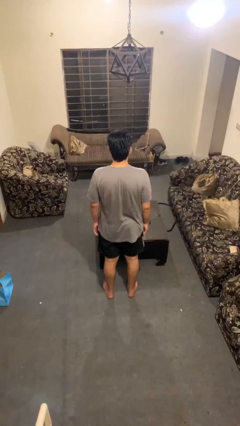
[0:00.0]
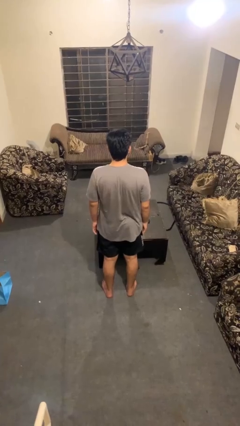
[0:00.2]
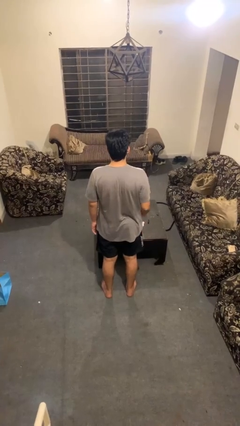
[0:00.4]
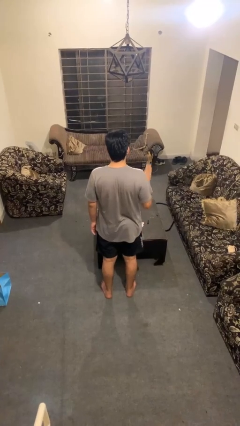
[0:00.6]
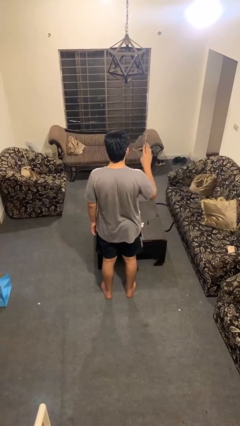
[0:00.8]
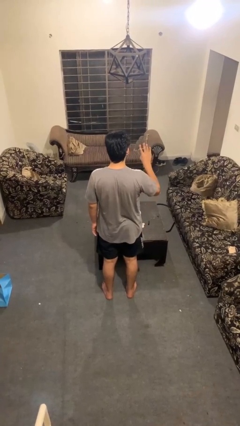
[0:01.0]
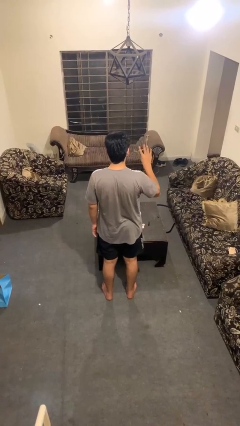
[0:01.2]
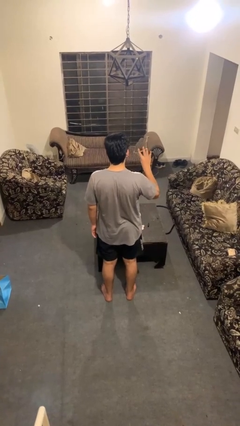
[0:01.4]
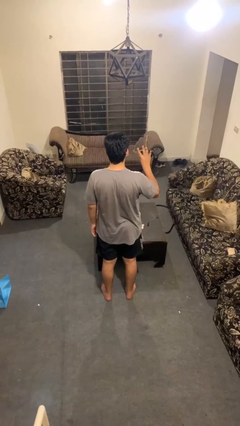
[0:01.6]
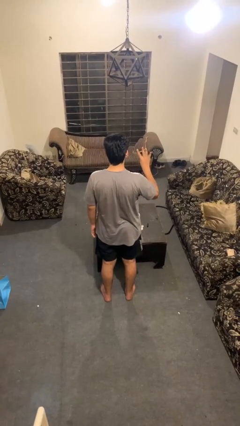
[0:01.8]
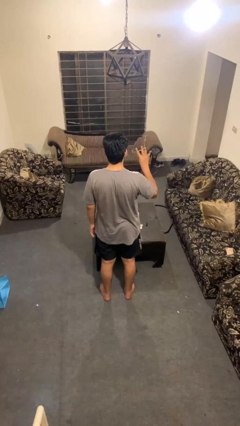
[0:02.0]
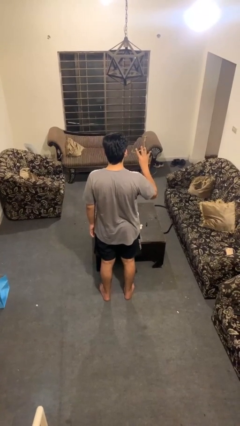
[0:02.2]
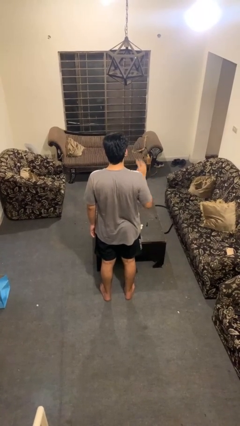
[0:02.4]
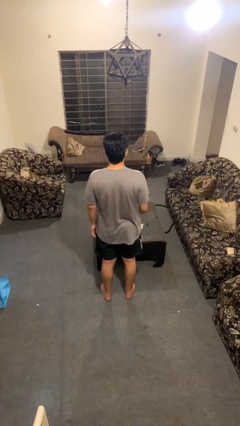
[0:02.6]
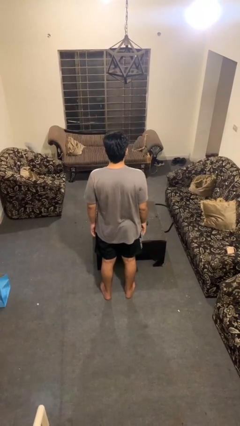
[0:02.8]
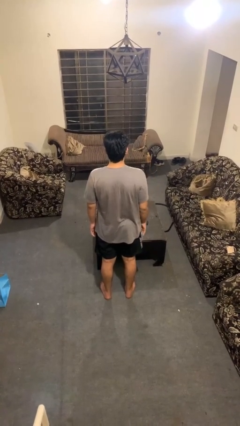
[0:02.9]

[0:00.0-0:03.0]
person gestures number four

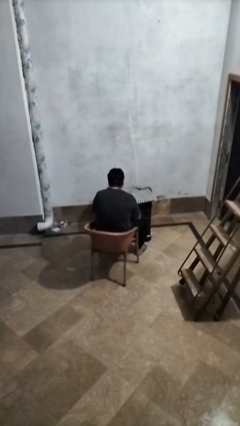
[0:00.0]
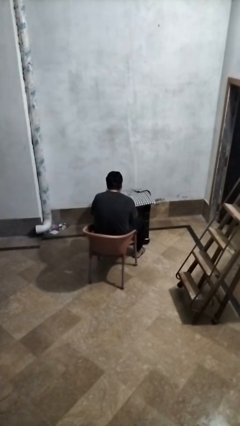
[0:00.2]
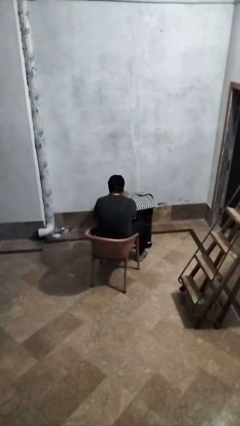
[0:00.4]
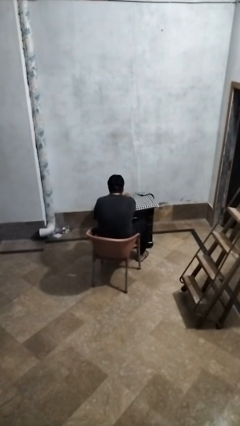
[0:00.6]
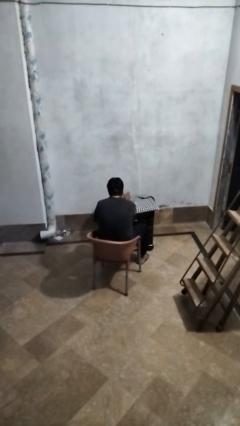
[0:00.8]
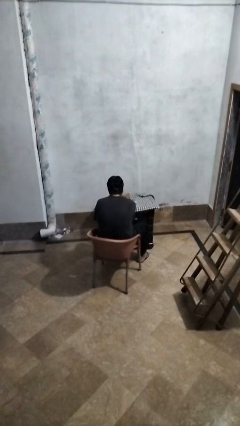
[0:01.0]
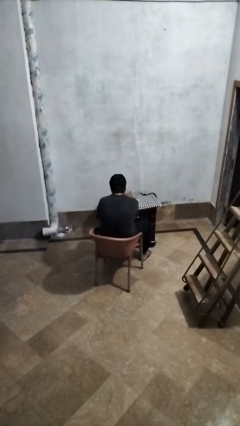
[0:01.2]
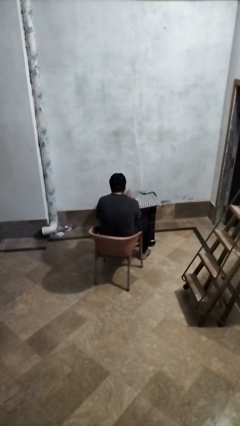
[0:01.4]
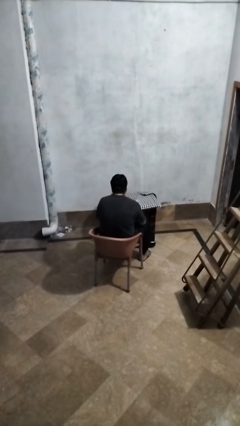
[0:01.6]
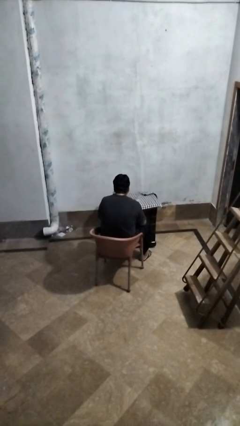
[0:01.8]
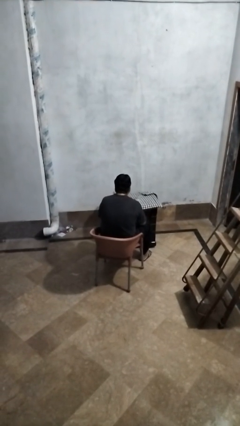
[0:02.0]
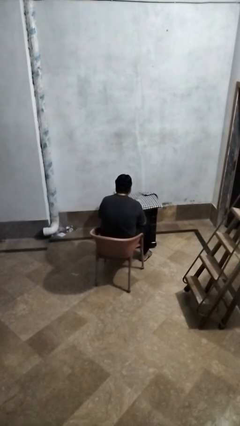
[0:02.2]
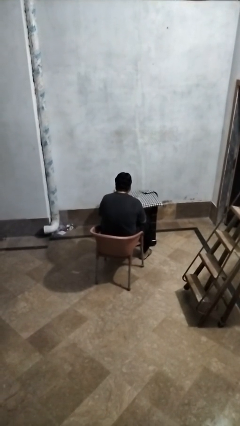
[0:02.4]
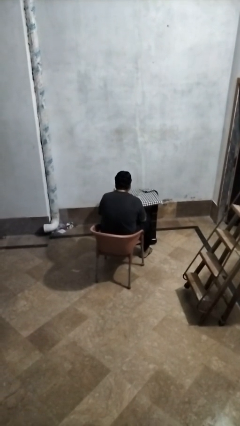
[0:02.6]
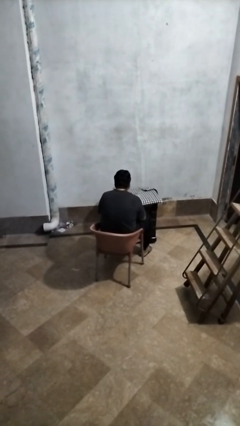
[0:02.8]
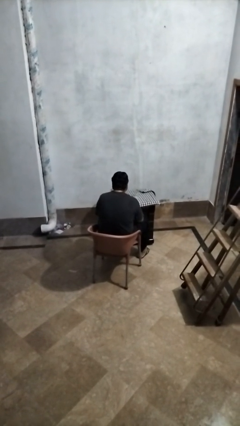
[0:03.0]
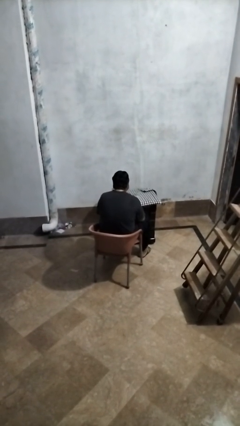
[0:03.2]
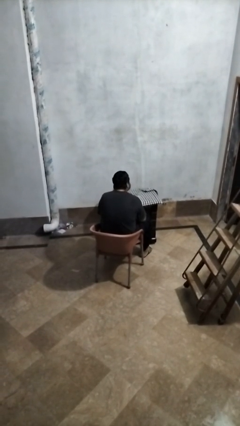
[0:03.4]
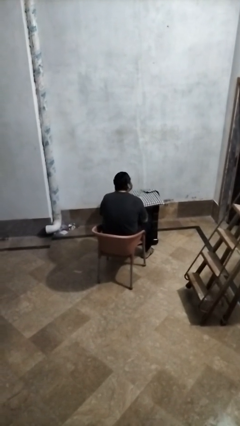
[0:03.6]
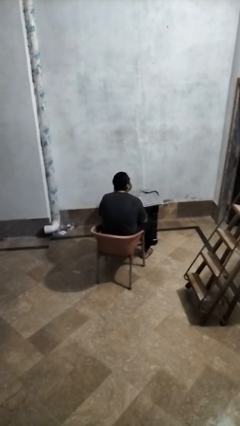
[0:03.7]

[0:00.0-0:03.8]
person sets upright glass

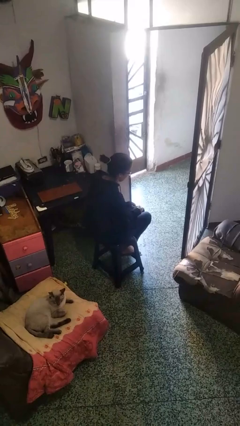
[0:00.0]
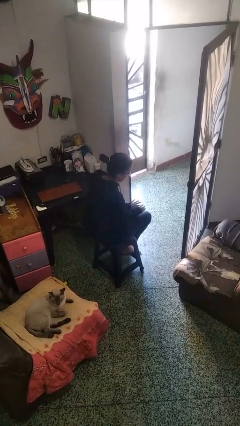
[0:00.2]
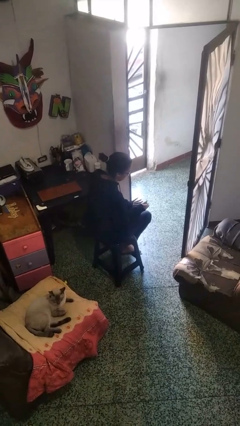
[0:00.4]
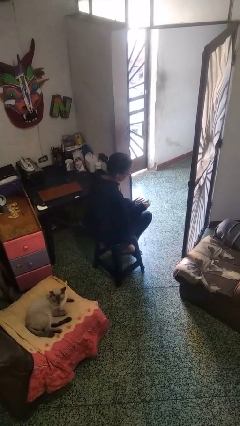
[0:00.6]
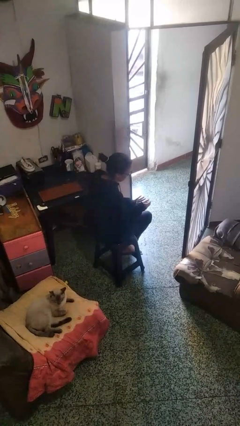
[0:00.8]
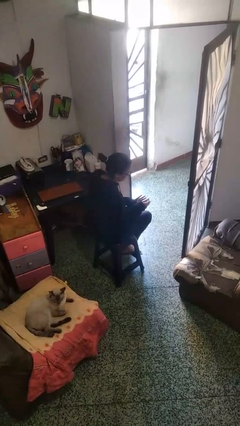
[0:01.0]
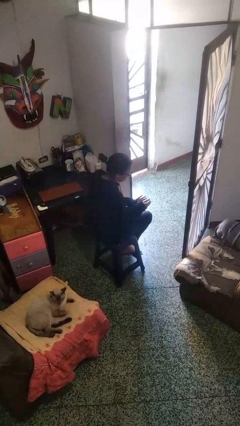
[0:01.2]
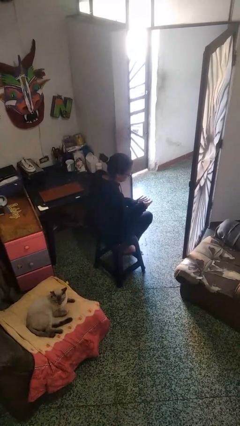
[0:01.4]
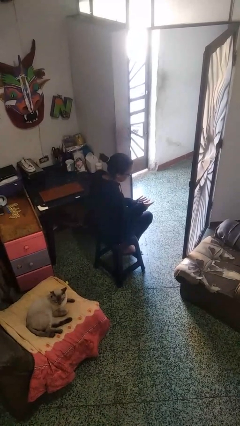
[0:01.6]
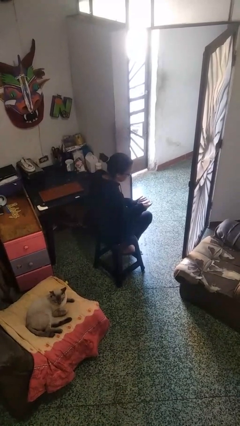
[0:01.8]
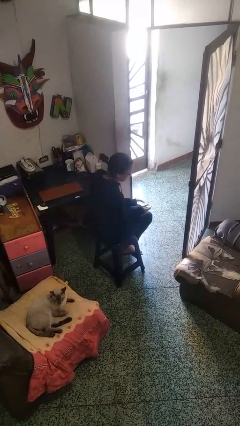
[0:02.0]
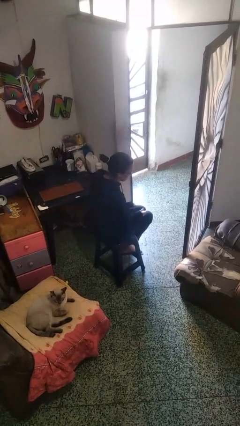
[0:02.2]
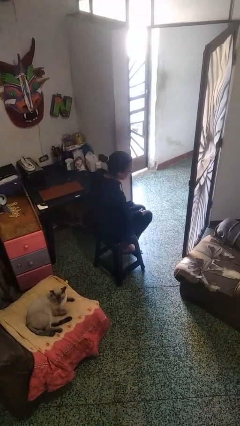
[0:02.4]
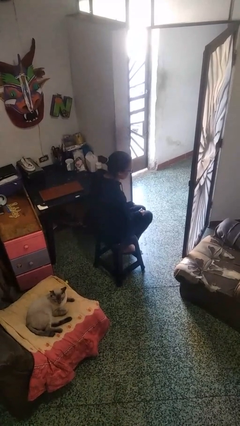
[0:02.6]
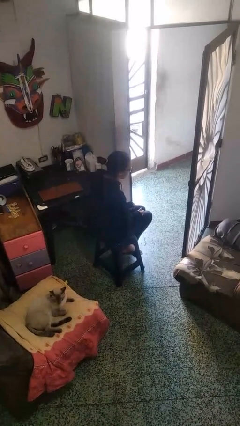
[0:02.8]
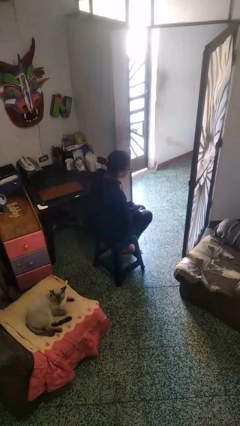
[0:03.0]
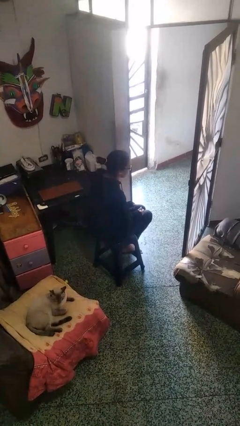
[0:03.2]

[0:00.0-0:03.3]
person clips fingernails

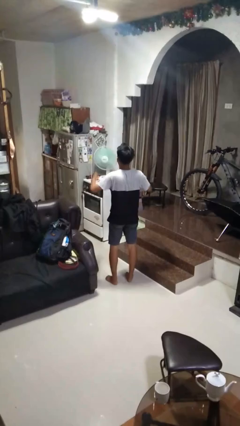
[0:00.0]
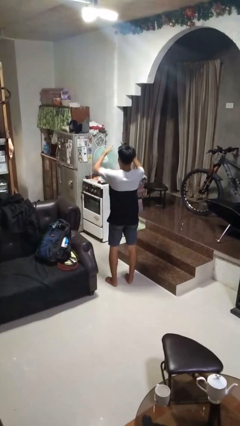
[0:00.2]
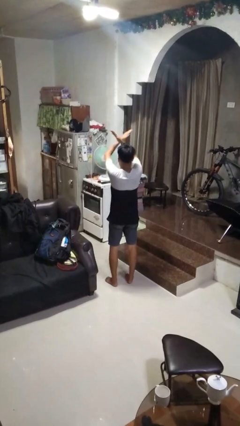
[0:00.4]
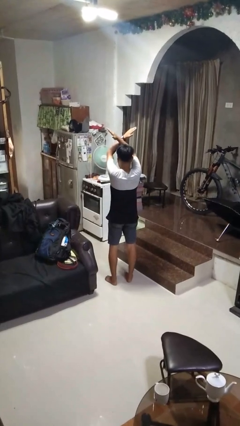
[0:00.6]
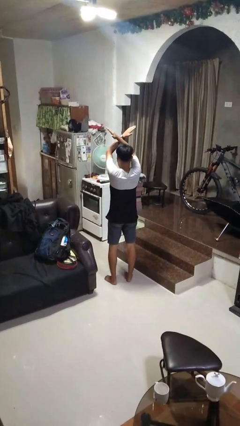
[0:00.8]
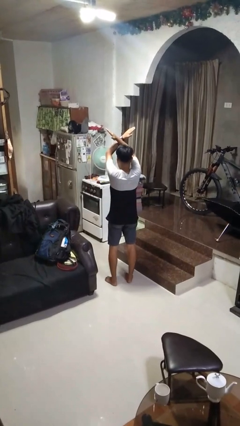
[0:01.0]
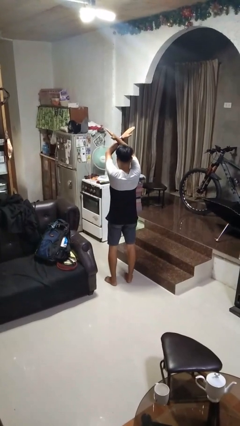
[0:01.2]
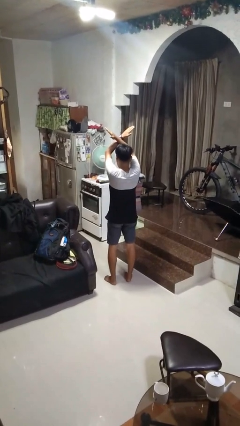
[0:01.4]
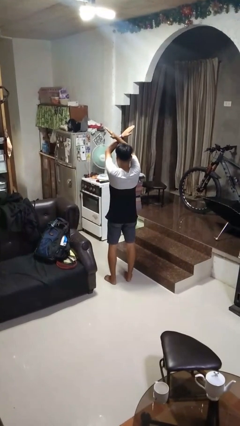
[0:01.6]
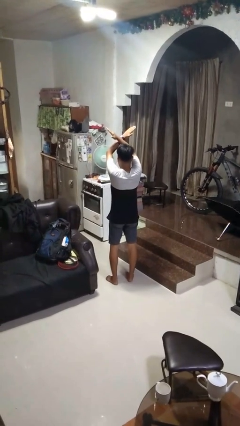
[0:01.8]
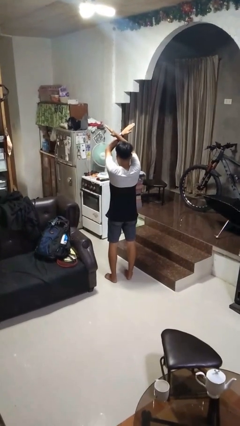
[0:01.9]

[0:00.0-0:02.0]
person gestures arms x

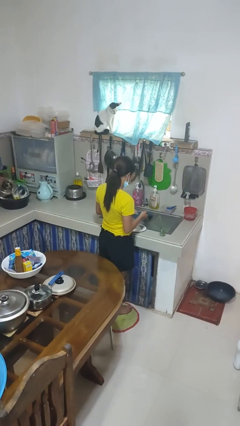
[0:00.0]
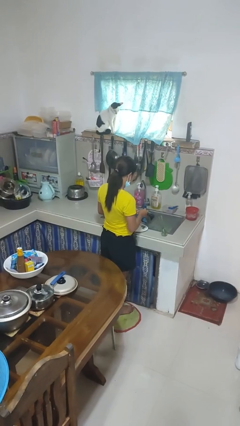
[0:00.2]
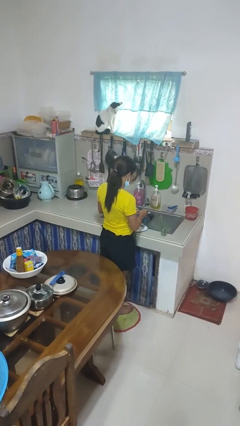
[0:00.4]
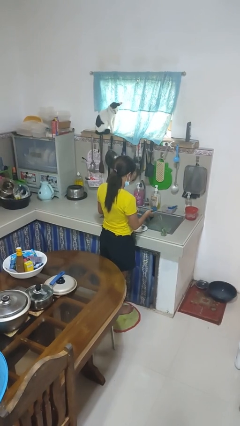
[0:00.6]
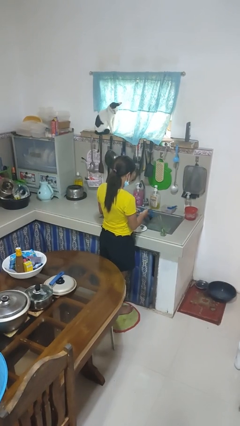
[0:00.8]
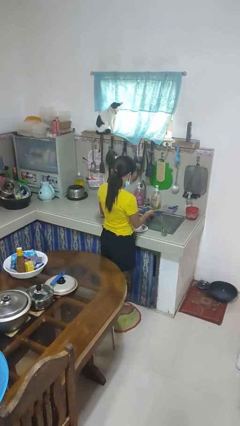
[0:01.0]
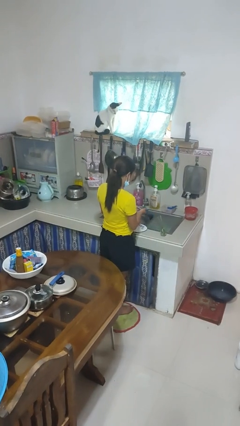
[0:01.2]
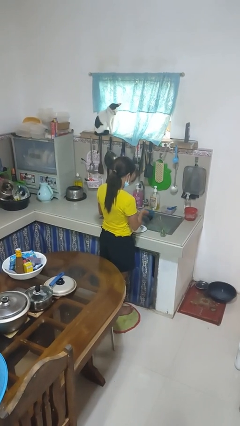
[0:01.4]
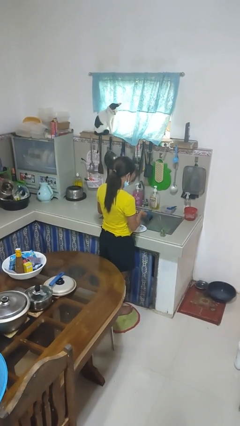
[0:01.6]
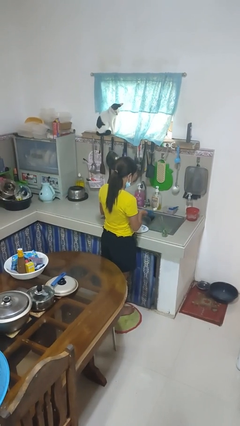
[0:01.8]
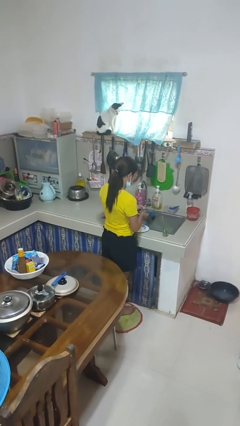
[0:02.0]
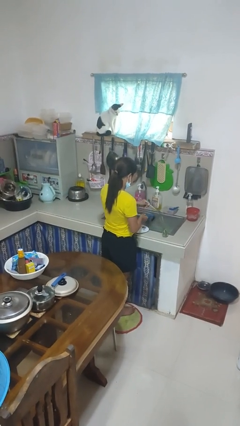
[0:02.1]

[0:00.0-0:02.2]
person dries dish

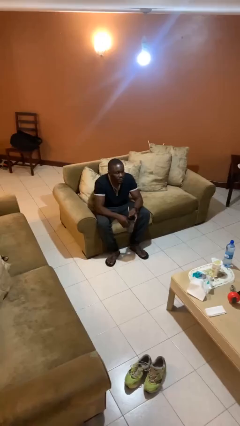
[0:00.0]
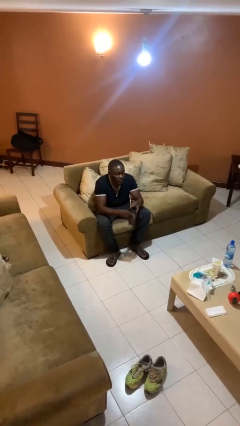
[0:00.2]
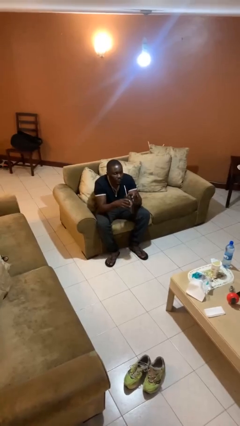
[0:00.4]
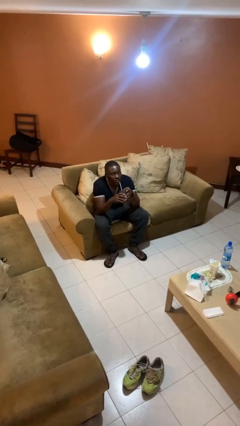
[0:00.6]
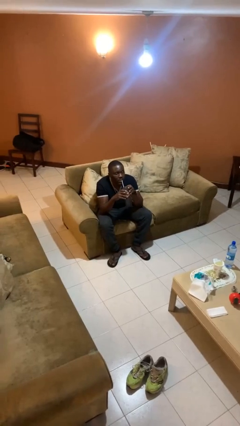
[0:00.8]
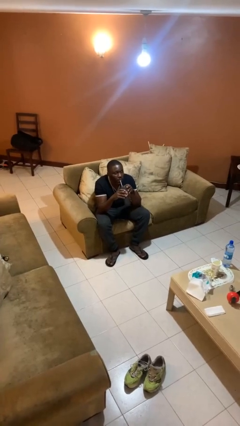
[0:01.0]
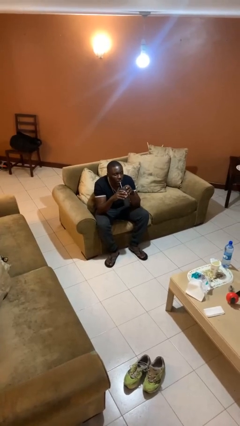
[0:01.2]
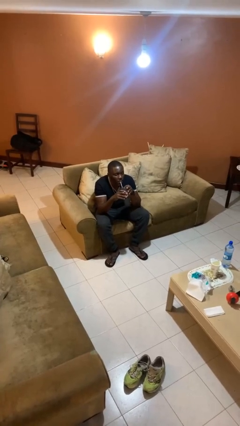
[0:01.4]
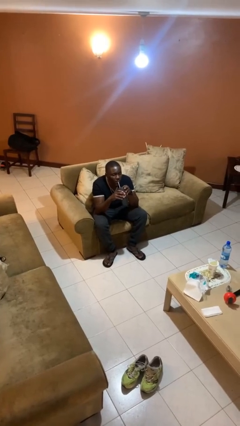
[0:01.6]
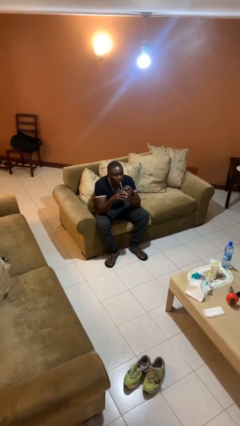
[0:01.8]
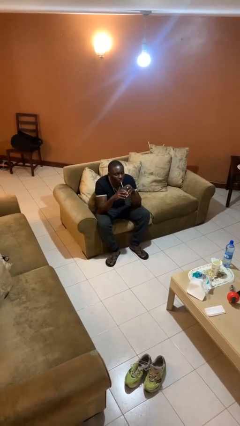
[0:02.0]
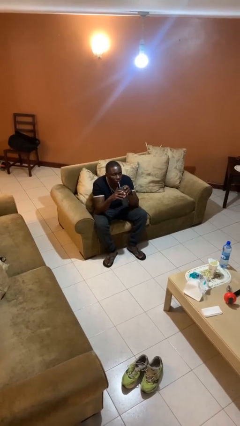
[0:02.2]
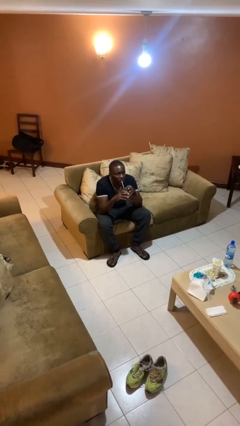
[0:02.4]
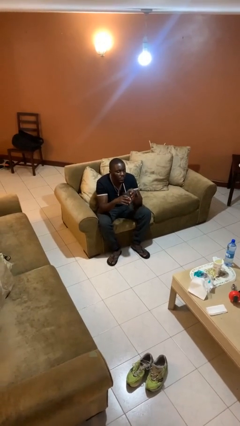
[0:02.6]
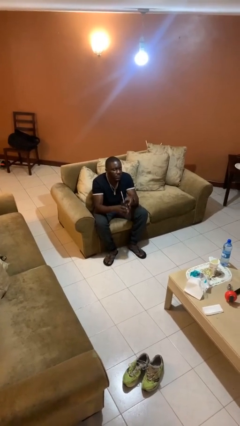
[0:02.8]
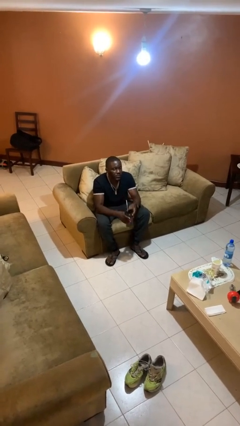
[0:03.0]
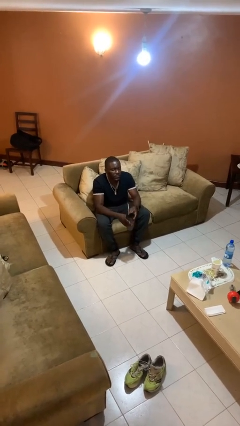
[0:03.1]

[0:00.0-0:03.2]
person drinks from straw

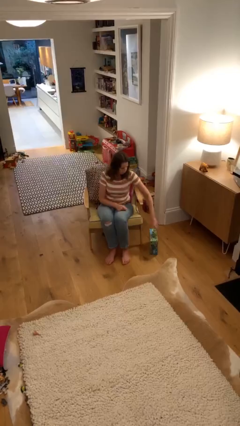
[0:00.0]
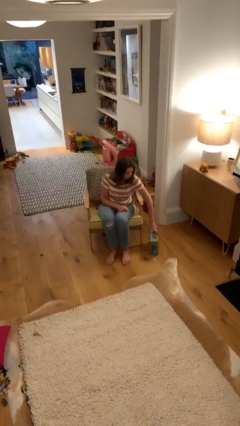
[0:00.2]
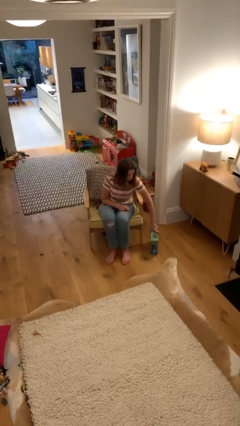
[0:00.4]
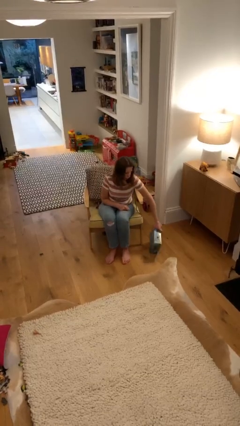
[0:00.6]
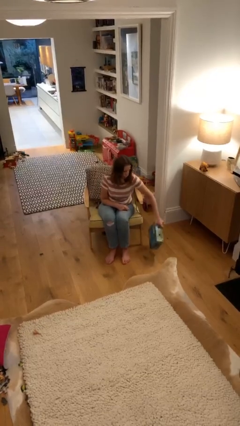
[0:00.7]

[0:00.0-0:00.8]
person picks up object from floor
